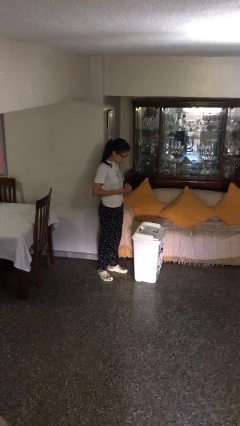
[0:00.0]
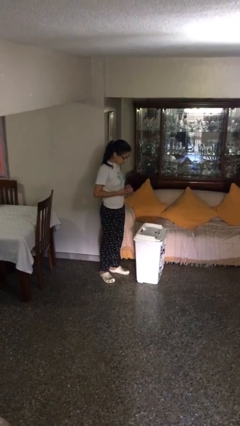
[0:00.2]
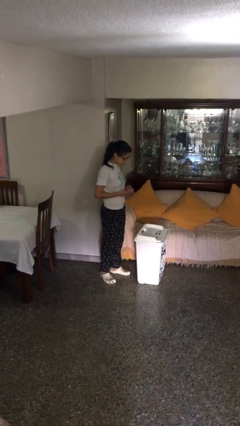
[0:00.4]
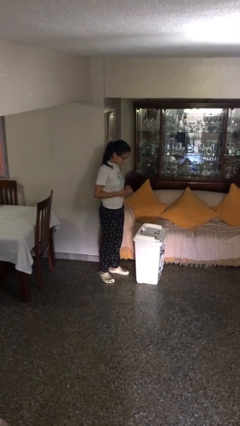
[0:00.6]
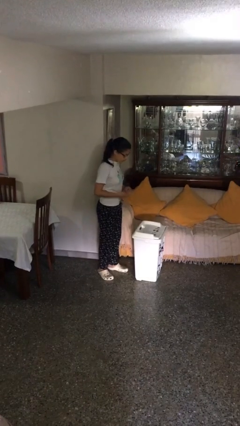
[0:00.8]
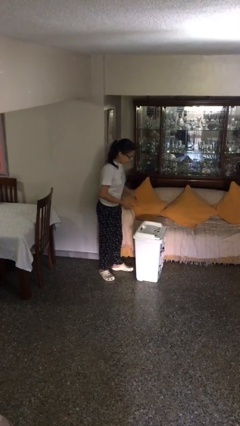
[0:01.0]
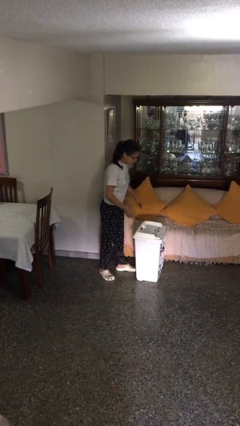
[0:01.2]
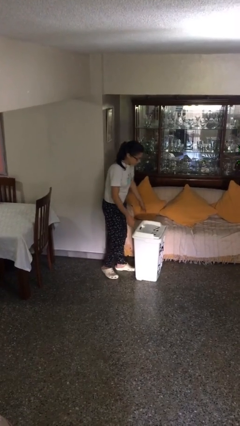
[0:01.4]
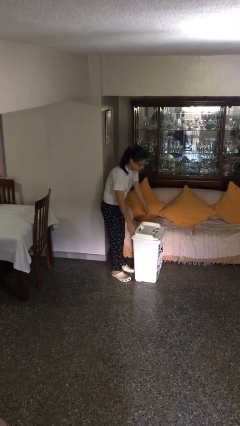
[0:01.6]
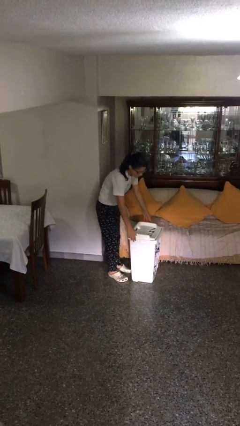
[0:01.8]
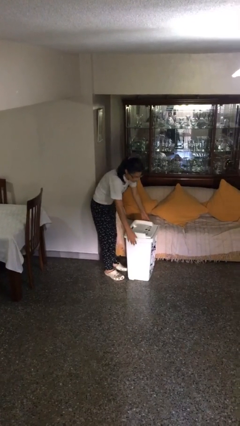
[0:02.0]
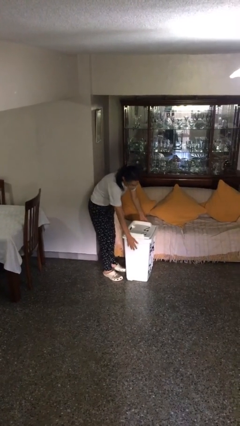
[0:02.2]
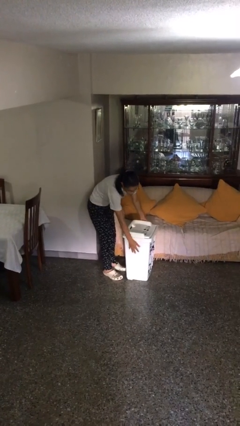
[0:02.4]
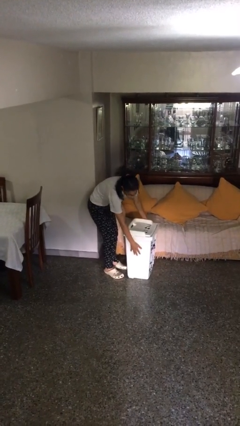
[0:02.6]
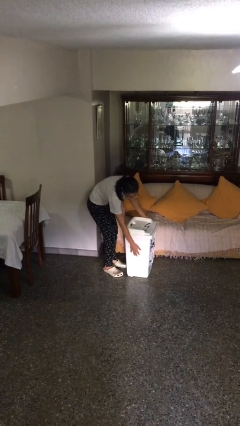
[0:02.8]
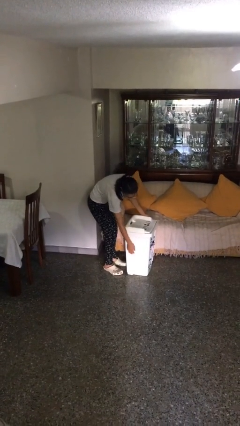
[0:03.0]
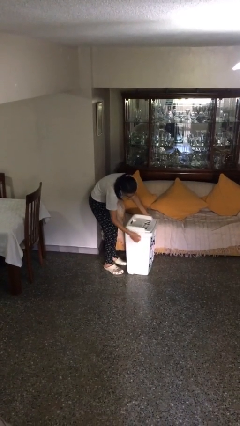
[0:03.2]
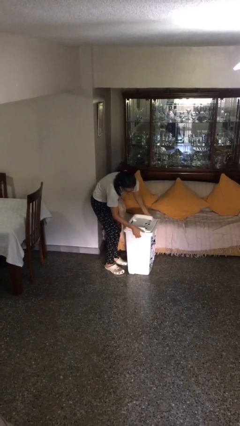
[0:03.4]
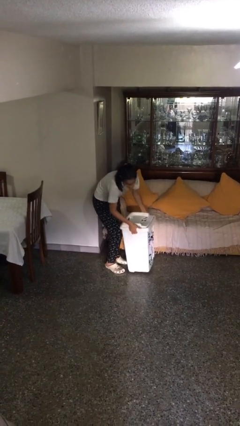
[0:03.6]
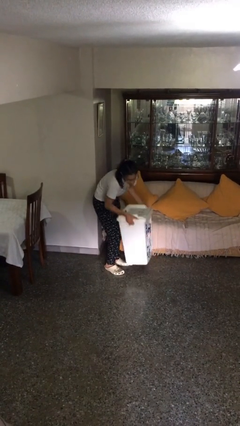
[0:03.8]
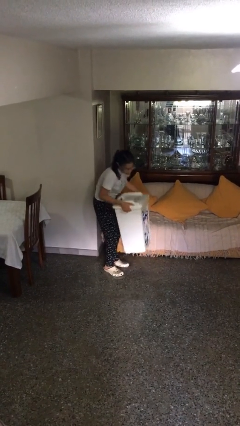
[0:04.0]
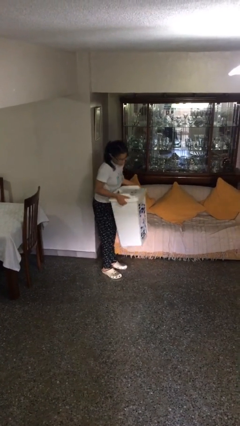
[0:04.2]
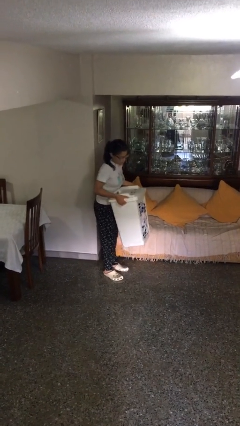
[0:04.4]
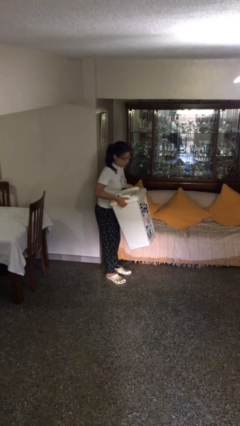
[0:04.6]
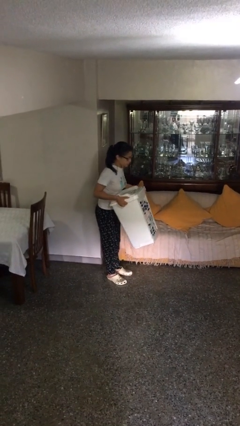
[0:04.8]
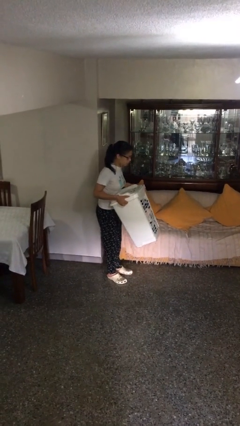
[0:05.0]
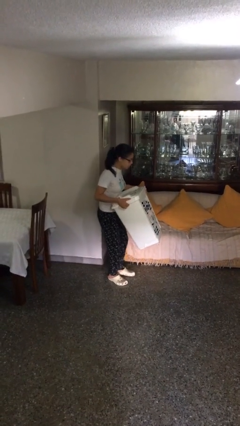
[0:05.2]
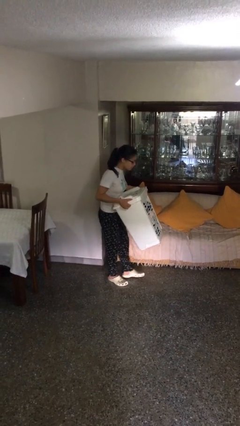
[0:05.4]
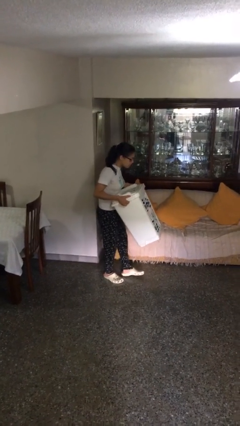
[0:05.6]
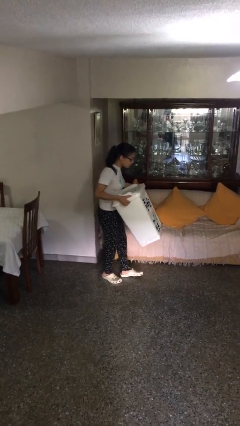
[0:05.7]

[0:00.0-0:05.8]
person picks up object from floor

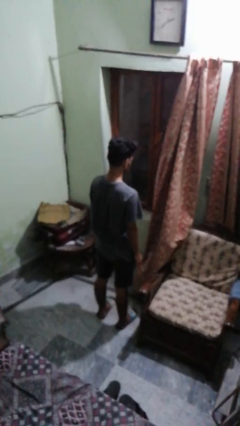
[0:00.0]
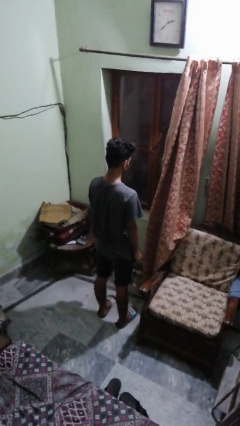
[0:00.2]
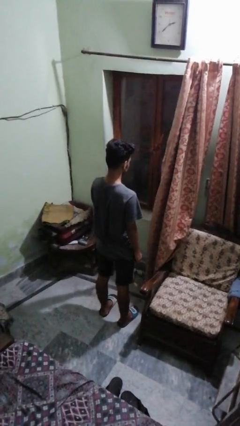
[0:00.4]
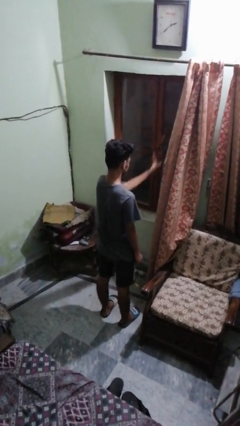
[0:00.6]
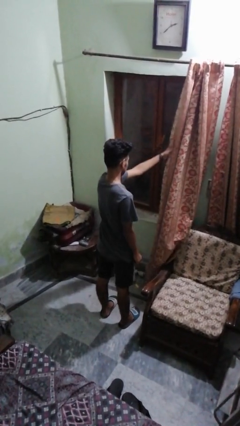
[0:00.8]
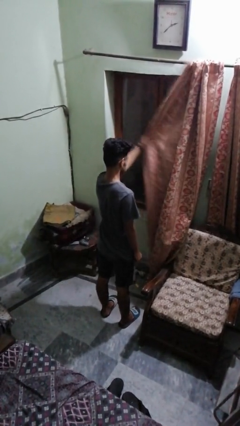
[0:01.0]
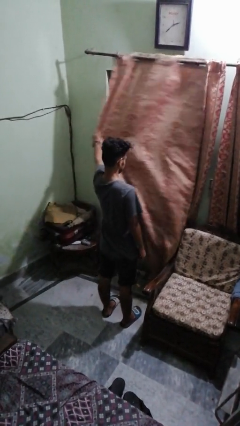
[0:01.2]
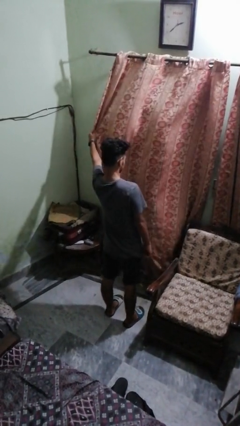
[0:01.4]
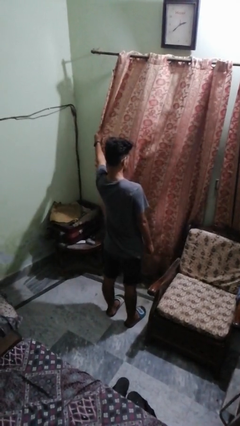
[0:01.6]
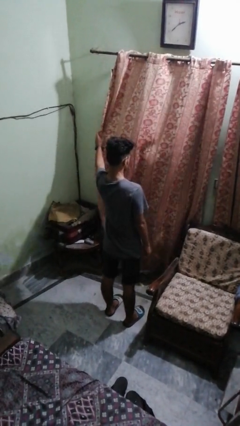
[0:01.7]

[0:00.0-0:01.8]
person closes curtains

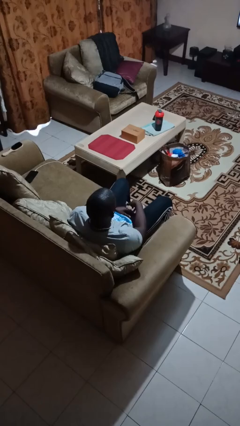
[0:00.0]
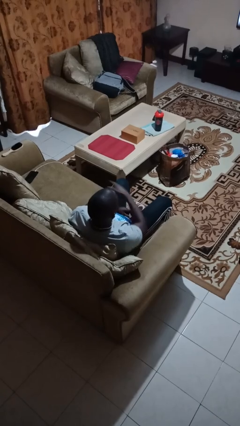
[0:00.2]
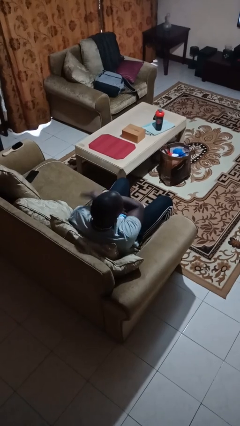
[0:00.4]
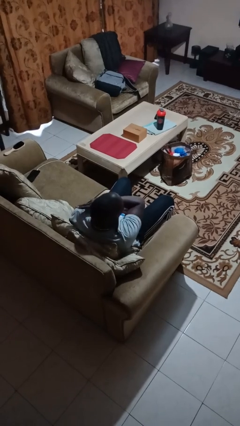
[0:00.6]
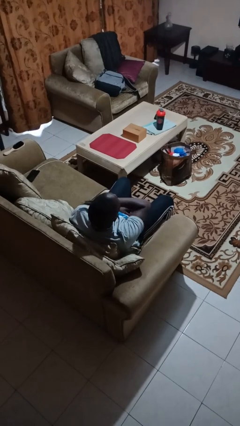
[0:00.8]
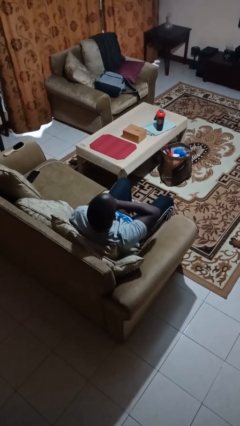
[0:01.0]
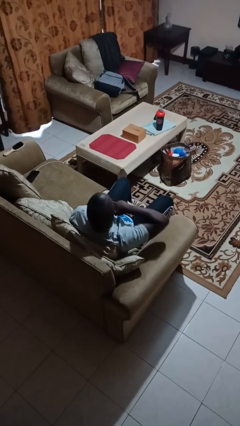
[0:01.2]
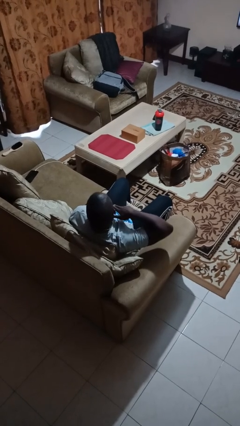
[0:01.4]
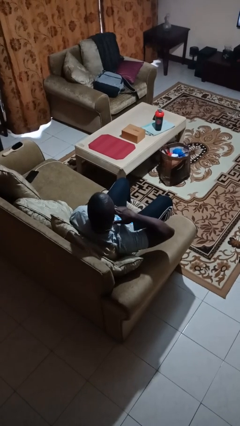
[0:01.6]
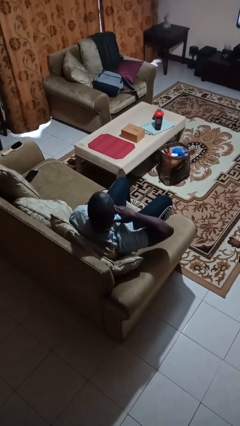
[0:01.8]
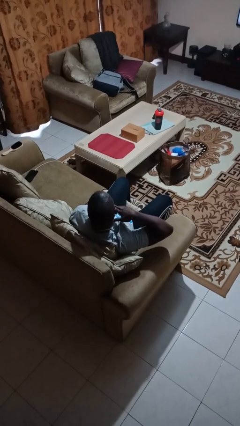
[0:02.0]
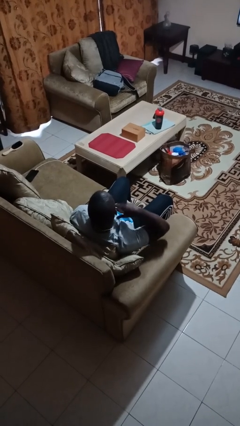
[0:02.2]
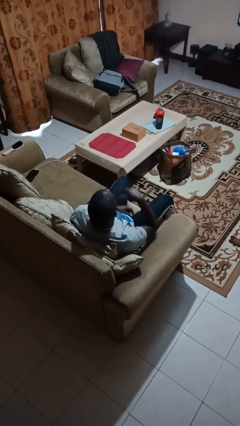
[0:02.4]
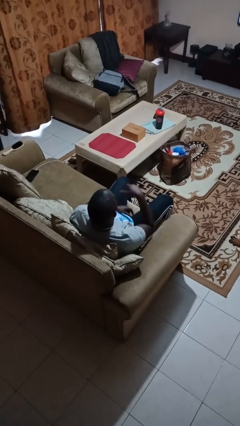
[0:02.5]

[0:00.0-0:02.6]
person gestures cut

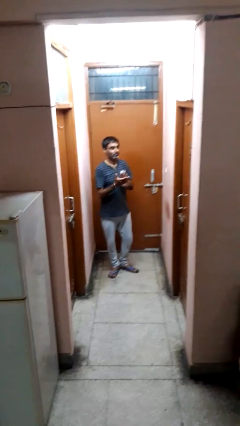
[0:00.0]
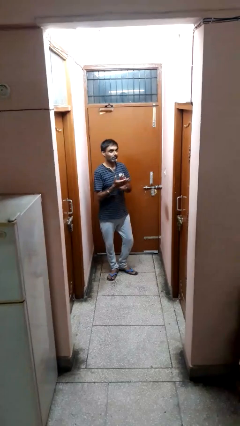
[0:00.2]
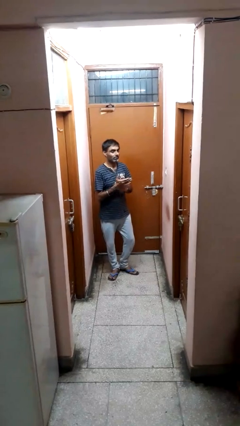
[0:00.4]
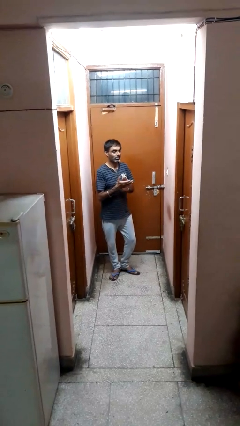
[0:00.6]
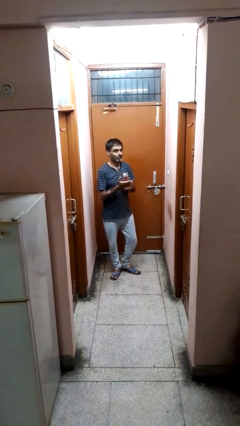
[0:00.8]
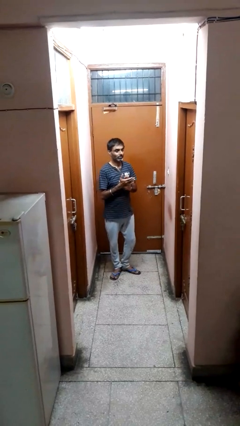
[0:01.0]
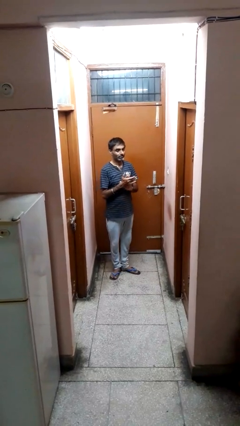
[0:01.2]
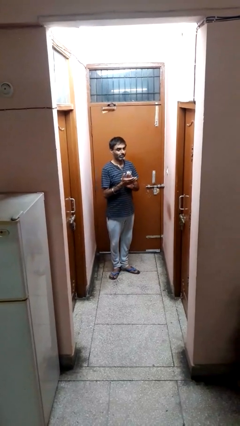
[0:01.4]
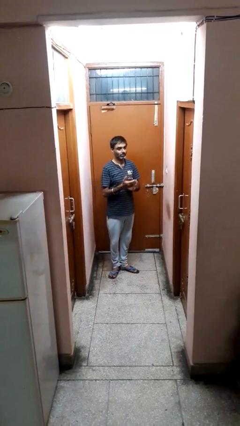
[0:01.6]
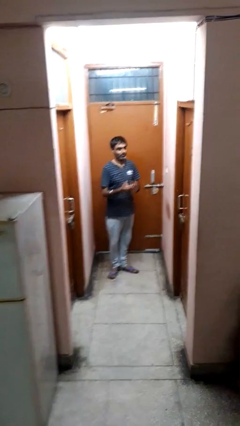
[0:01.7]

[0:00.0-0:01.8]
person claps hands

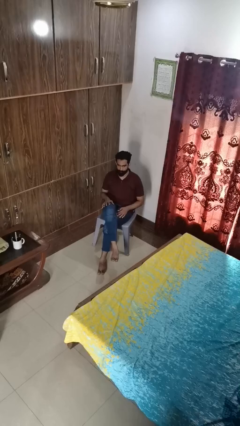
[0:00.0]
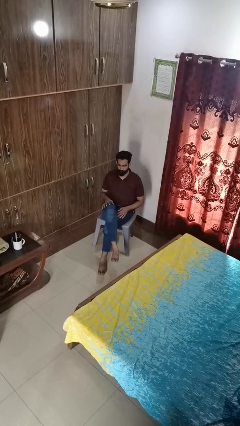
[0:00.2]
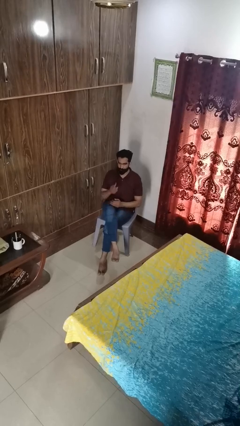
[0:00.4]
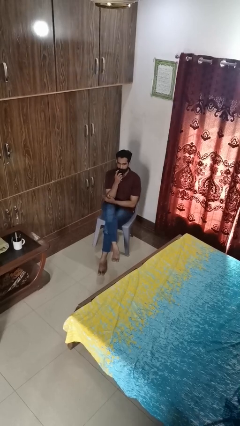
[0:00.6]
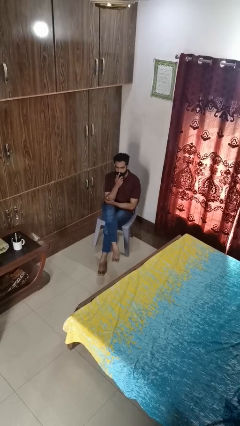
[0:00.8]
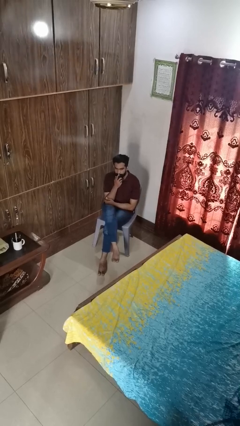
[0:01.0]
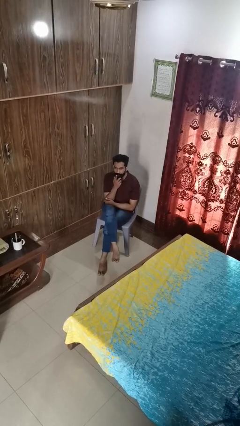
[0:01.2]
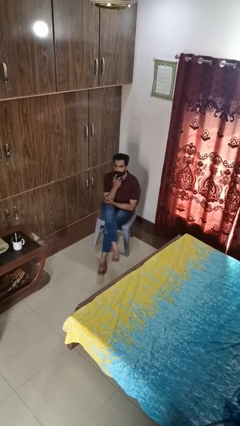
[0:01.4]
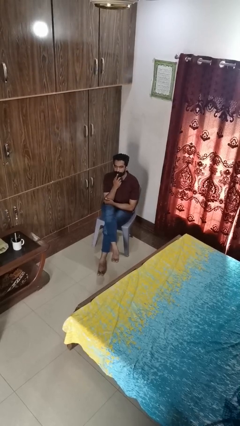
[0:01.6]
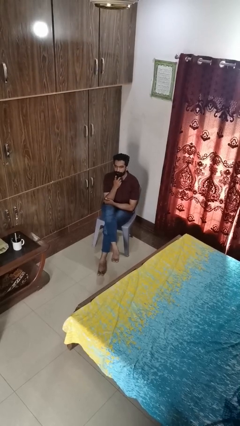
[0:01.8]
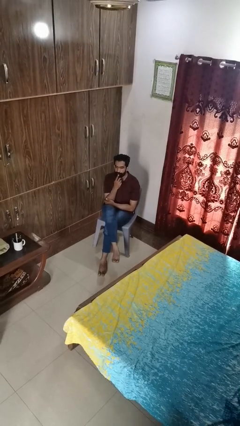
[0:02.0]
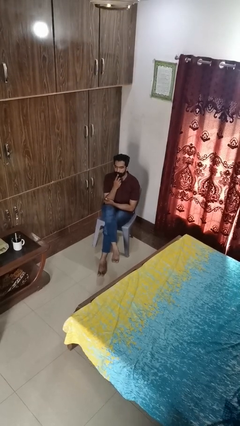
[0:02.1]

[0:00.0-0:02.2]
person strokes chin

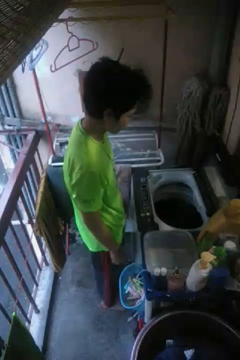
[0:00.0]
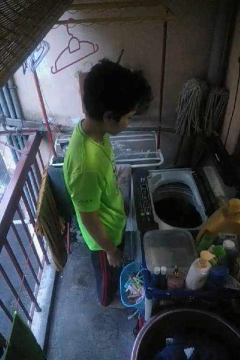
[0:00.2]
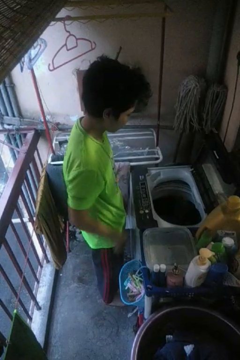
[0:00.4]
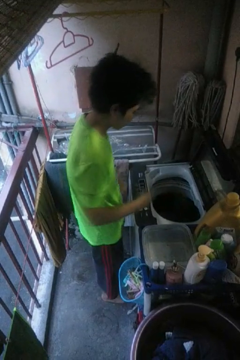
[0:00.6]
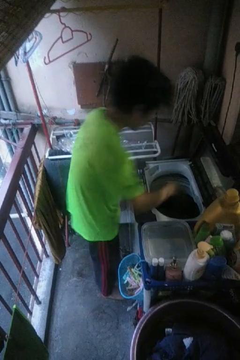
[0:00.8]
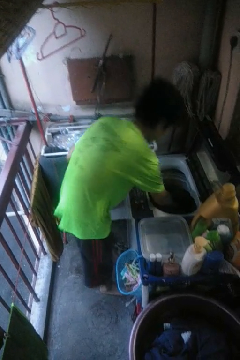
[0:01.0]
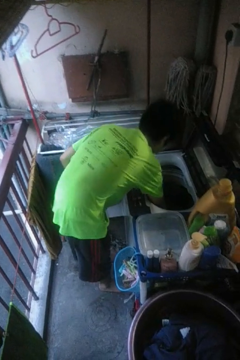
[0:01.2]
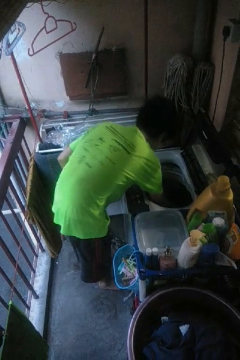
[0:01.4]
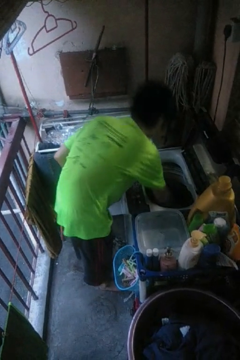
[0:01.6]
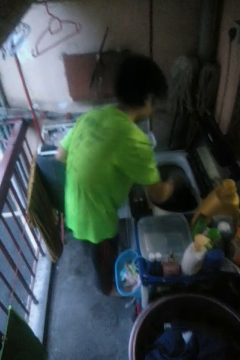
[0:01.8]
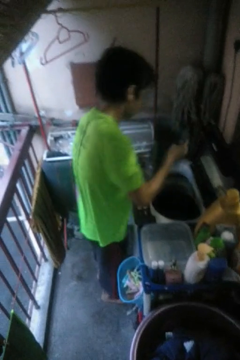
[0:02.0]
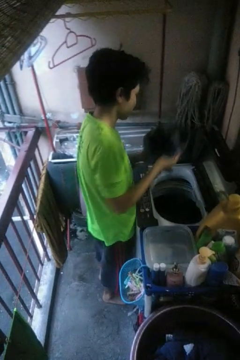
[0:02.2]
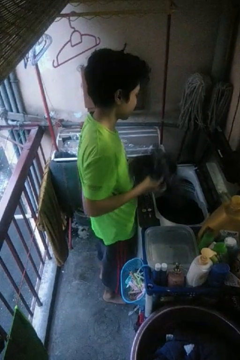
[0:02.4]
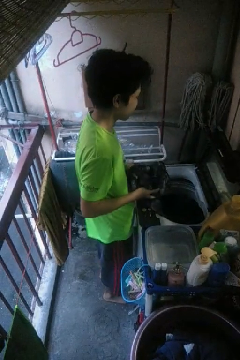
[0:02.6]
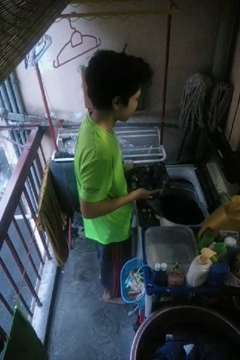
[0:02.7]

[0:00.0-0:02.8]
person unloads clotheswasher

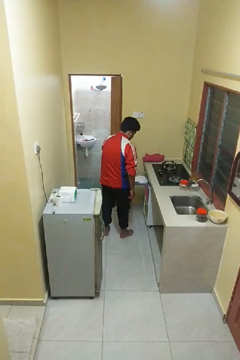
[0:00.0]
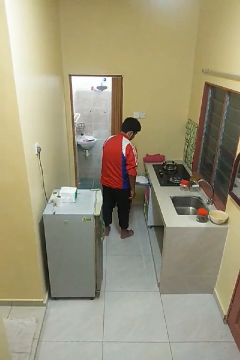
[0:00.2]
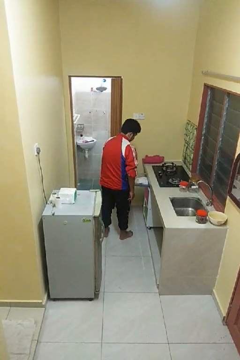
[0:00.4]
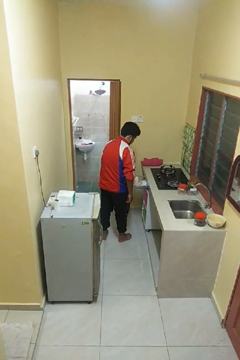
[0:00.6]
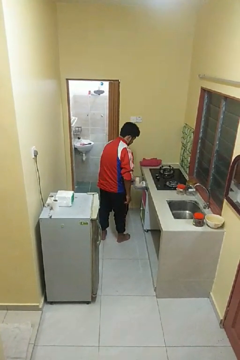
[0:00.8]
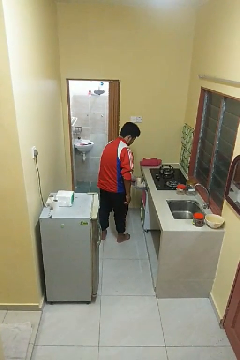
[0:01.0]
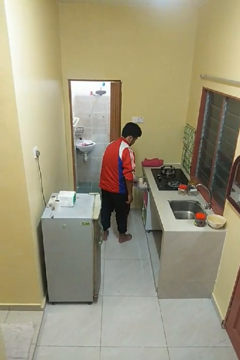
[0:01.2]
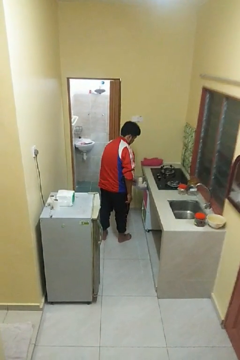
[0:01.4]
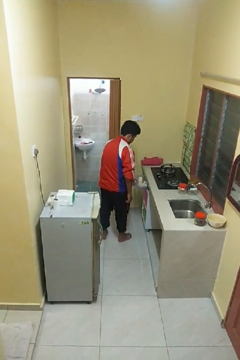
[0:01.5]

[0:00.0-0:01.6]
person closes kitchen drawer
